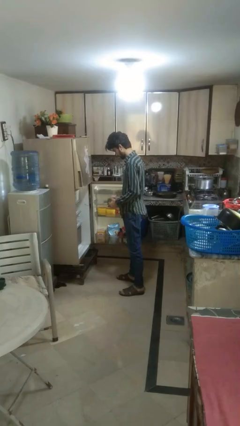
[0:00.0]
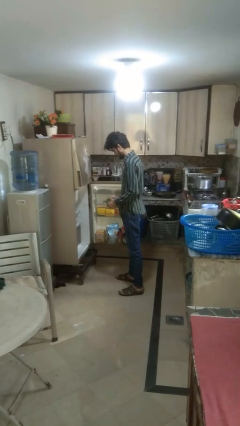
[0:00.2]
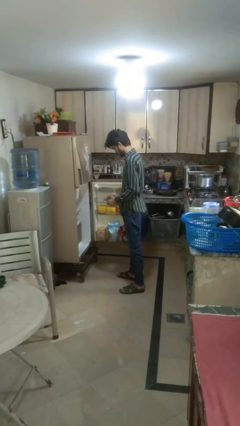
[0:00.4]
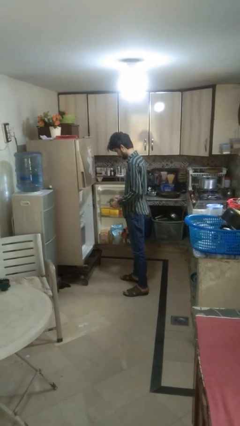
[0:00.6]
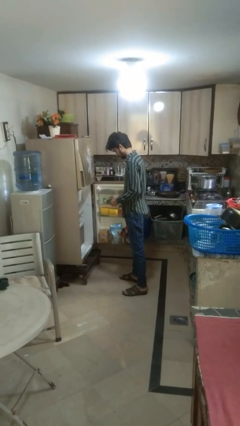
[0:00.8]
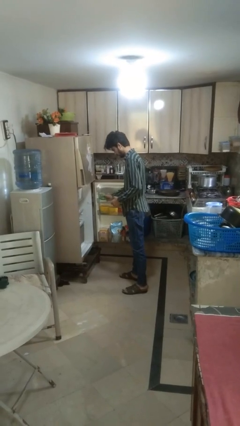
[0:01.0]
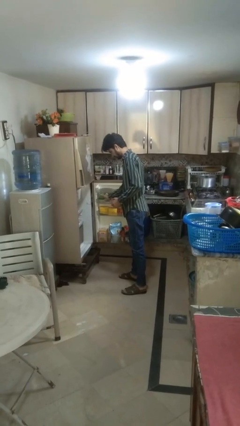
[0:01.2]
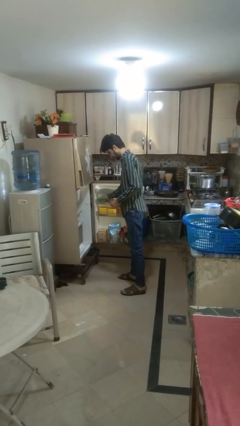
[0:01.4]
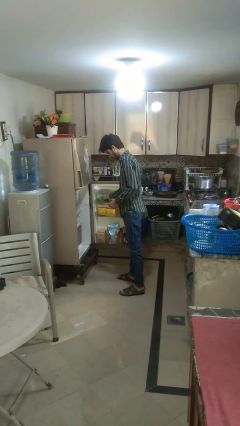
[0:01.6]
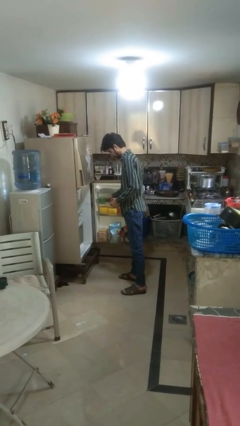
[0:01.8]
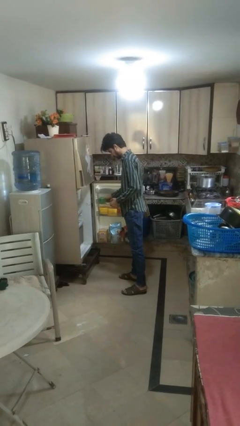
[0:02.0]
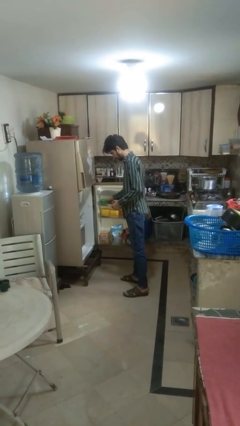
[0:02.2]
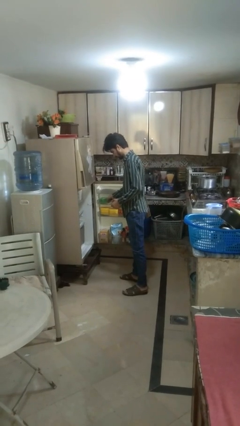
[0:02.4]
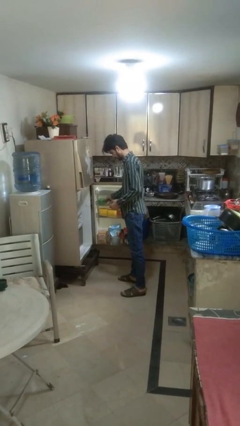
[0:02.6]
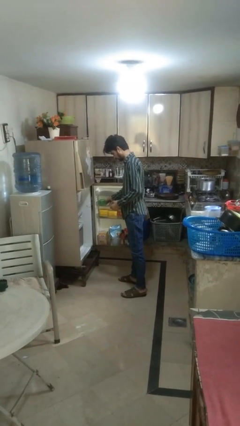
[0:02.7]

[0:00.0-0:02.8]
person puts object into refrigerator

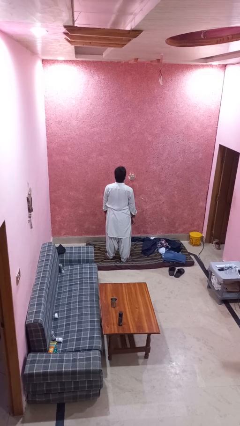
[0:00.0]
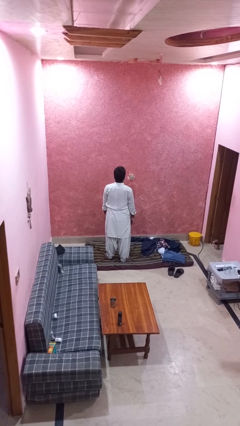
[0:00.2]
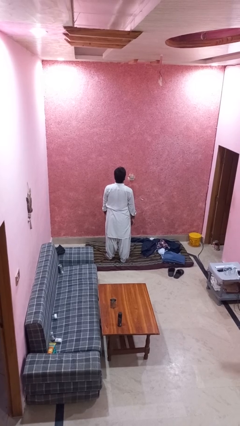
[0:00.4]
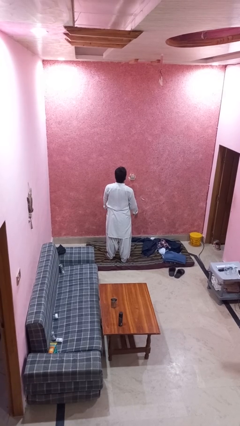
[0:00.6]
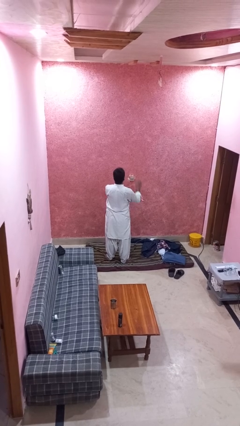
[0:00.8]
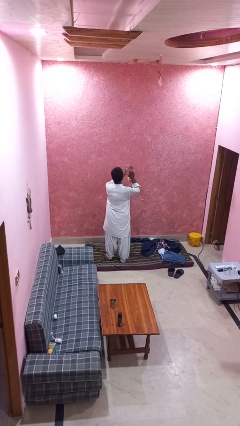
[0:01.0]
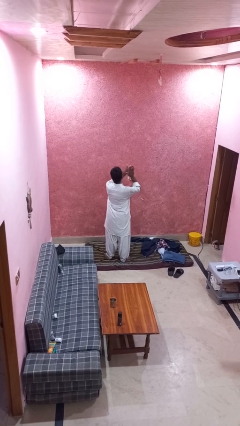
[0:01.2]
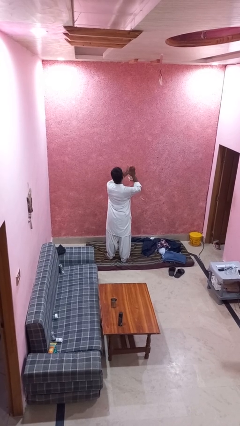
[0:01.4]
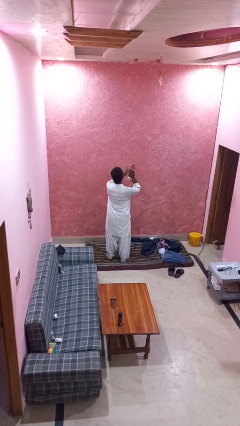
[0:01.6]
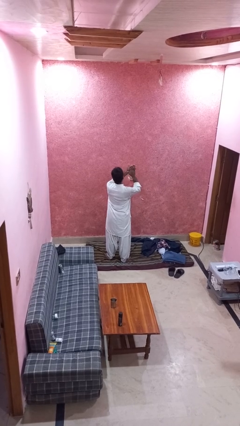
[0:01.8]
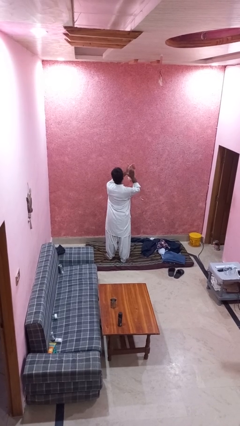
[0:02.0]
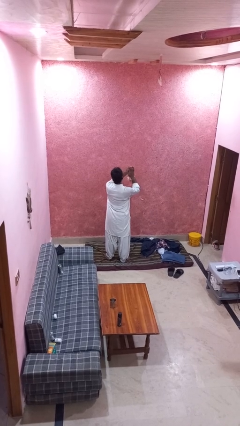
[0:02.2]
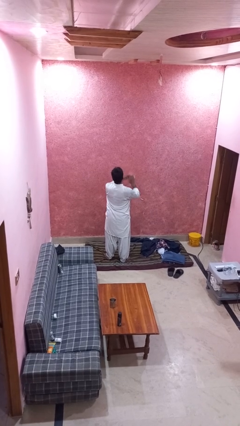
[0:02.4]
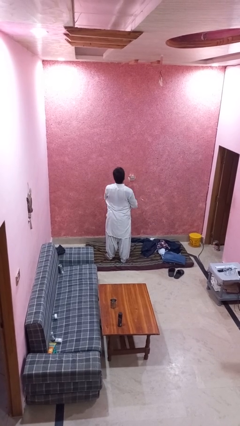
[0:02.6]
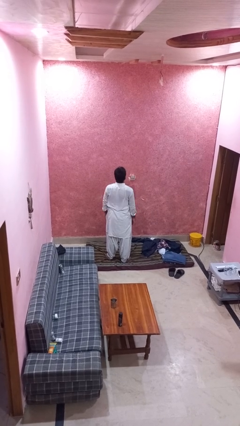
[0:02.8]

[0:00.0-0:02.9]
person claps hands

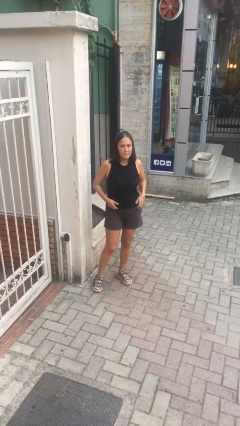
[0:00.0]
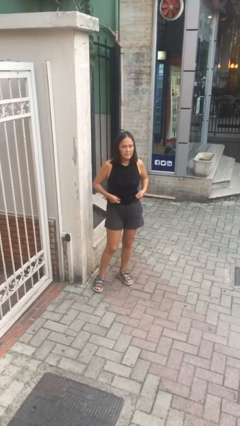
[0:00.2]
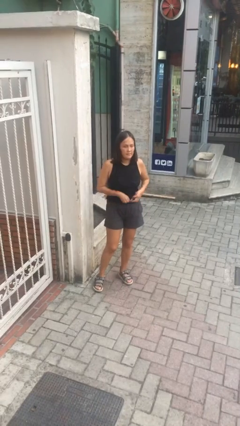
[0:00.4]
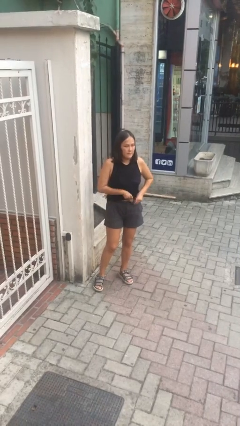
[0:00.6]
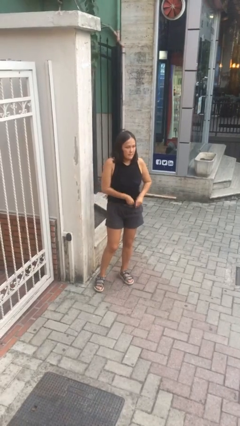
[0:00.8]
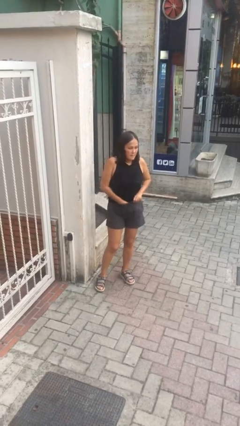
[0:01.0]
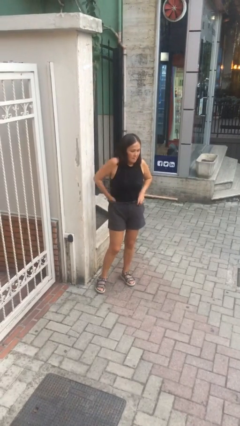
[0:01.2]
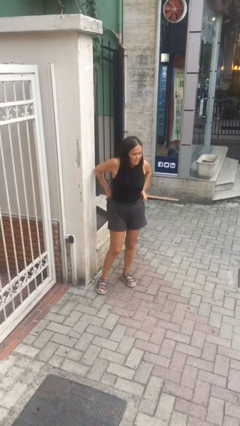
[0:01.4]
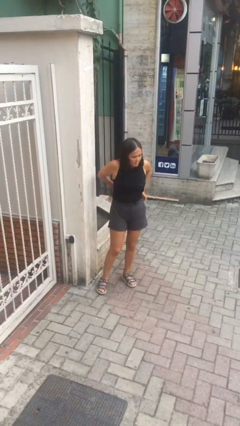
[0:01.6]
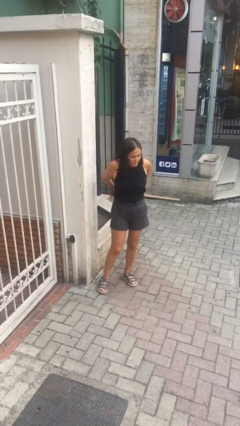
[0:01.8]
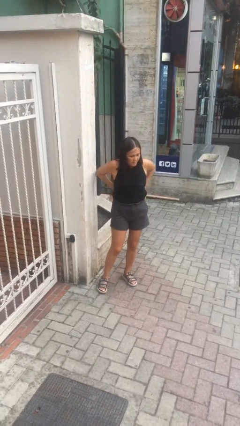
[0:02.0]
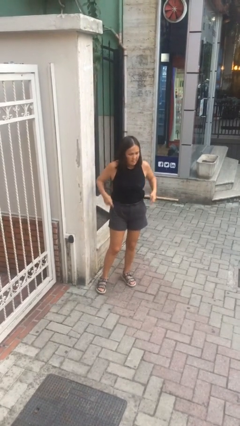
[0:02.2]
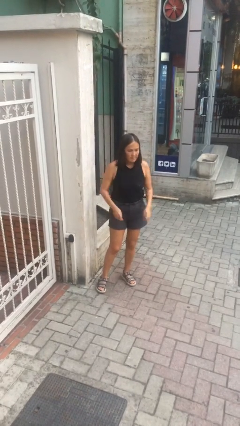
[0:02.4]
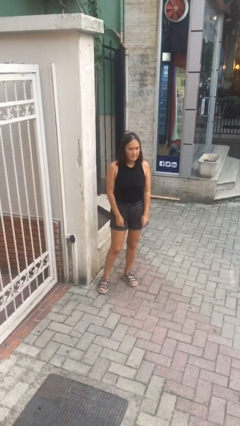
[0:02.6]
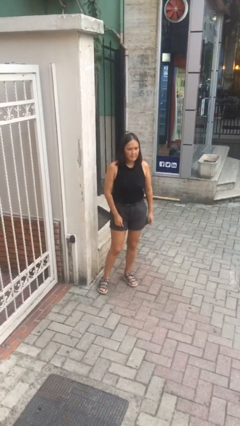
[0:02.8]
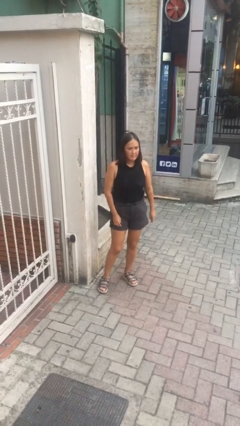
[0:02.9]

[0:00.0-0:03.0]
person tucks in shirt

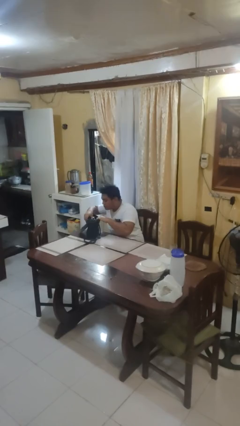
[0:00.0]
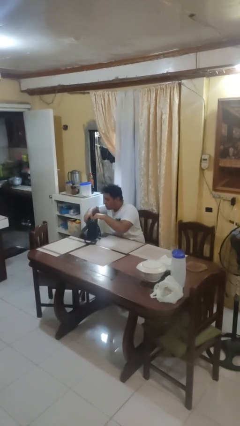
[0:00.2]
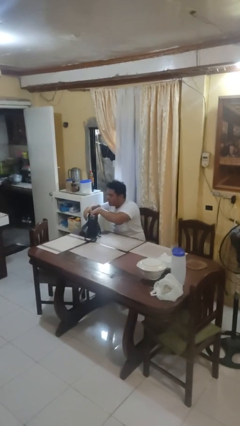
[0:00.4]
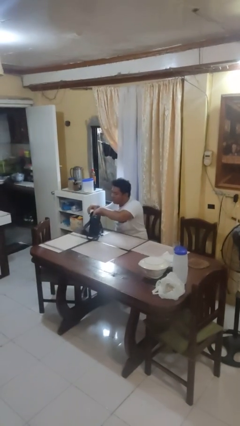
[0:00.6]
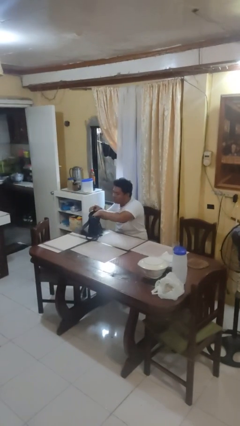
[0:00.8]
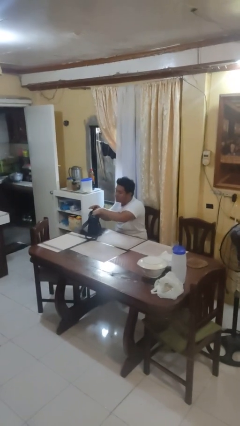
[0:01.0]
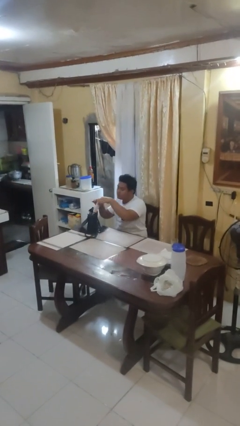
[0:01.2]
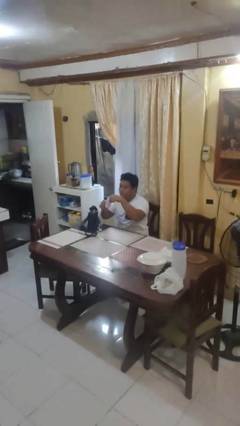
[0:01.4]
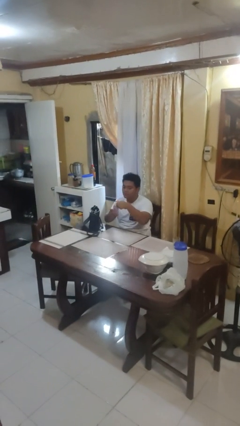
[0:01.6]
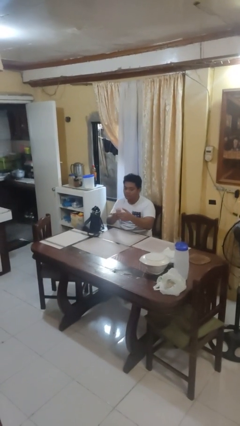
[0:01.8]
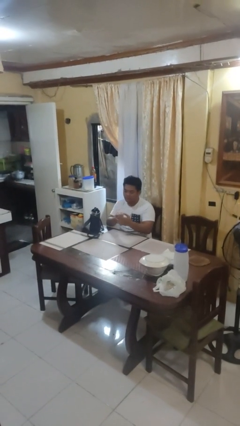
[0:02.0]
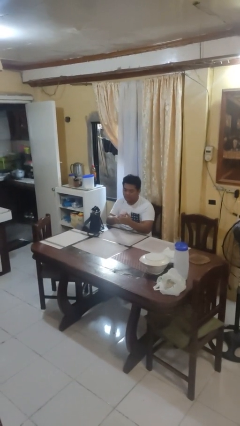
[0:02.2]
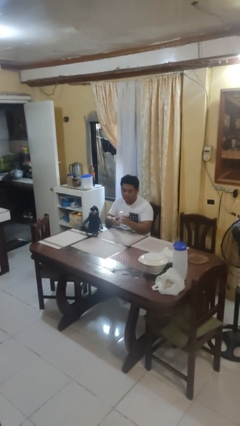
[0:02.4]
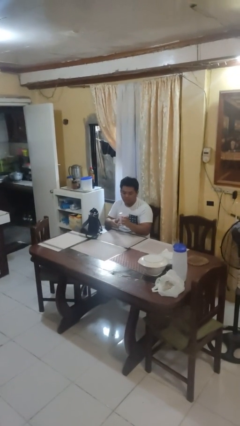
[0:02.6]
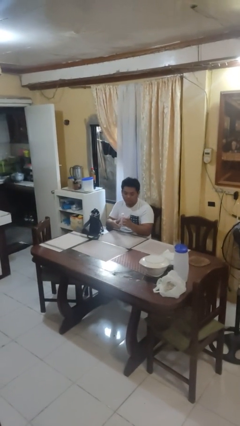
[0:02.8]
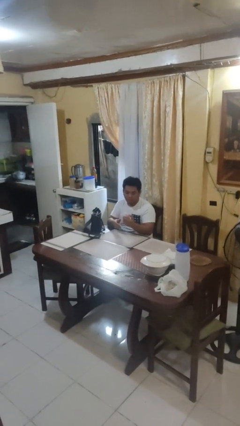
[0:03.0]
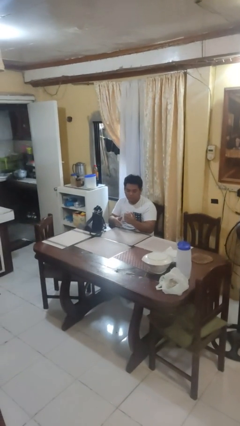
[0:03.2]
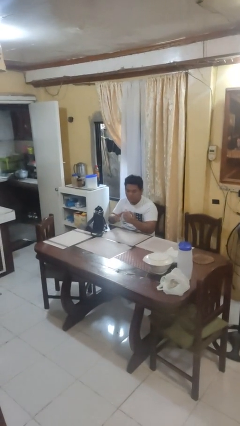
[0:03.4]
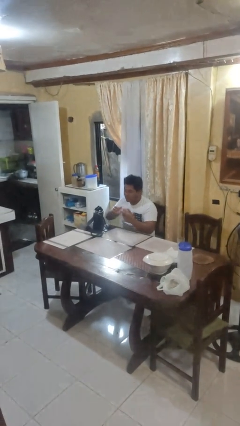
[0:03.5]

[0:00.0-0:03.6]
person takes object from purse

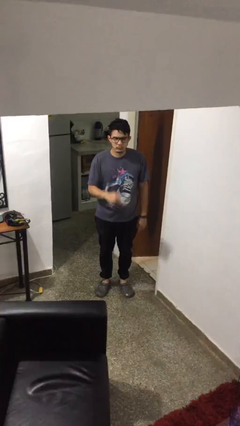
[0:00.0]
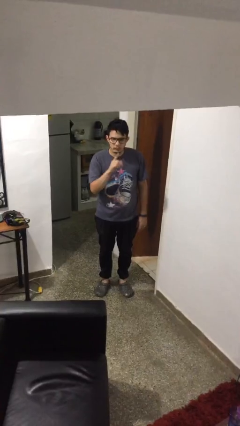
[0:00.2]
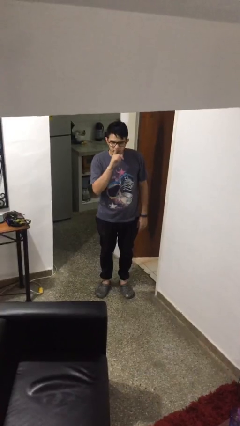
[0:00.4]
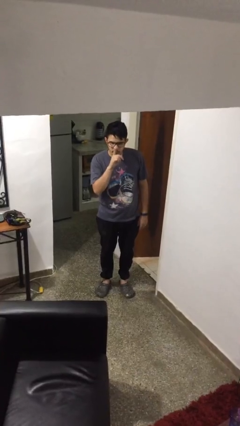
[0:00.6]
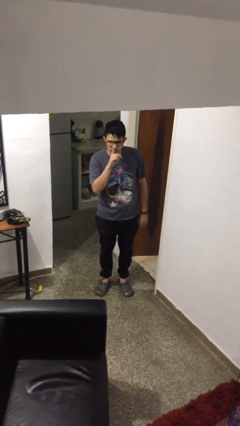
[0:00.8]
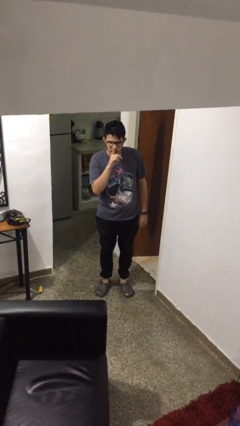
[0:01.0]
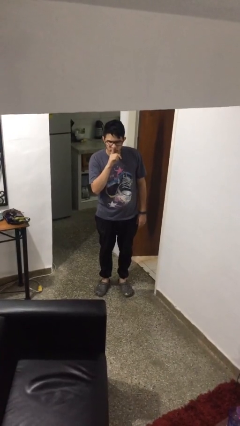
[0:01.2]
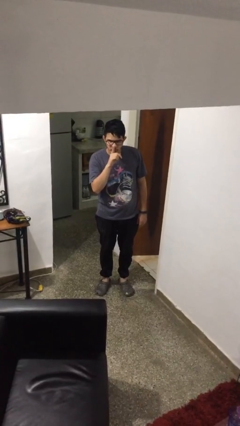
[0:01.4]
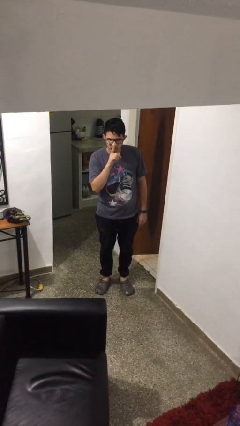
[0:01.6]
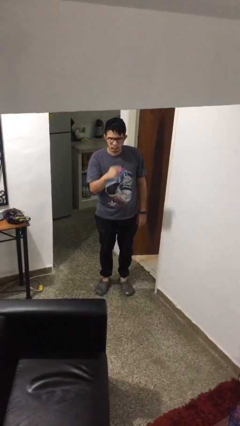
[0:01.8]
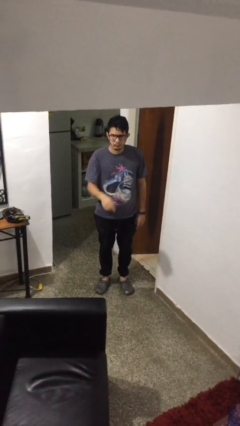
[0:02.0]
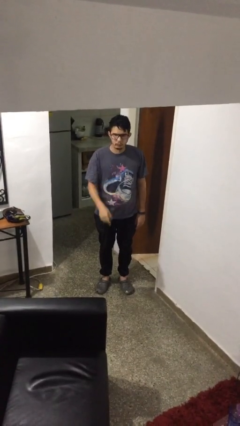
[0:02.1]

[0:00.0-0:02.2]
person gestures be quiet

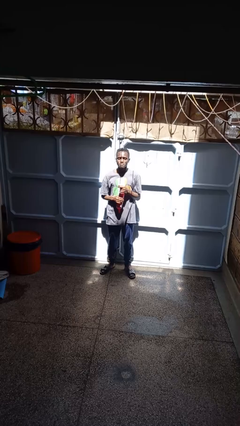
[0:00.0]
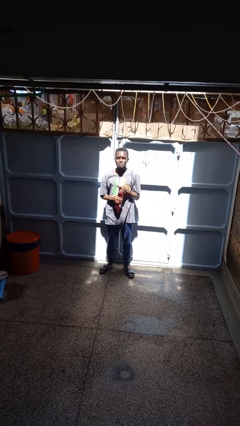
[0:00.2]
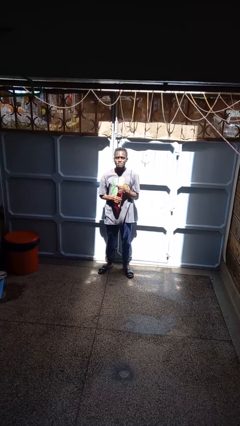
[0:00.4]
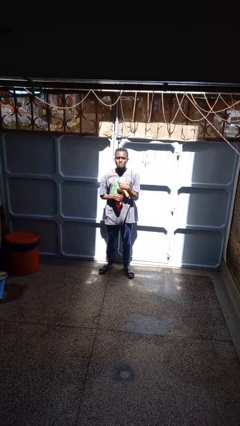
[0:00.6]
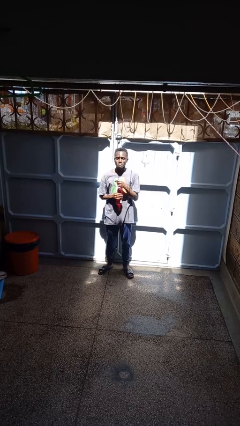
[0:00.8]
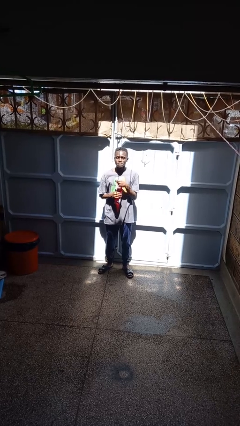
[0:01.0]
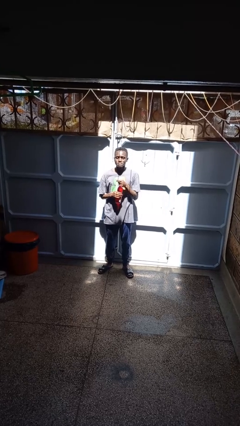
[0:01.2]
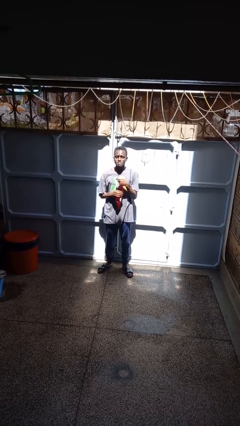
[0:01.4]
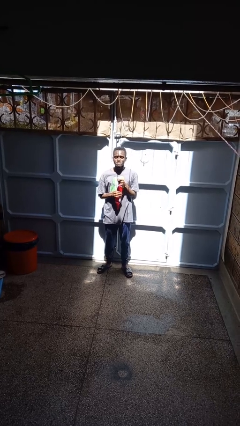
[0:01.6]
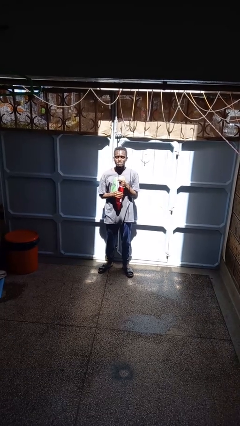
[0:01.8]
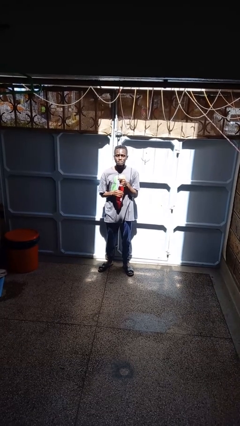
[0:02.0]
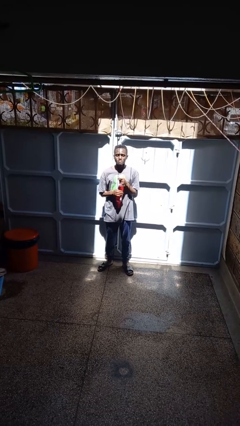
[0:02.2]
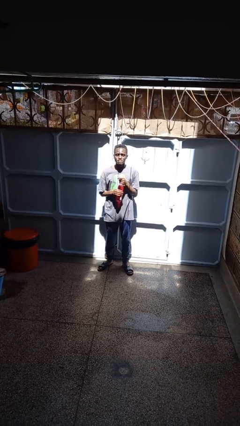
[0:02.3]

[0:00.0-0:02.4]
person opens beverage can

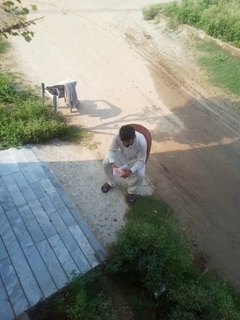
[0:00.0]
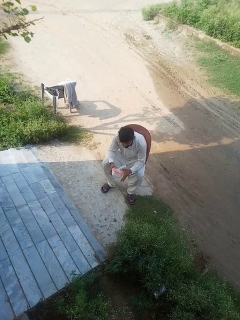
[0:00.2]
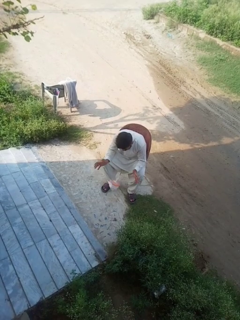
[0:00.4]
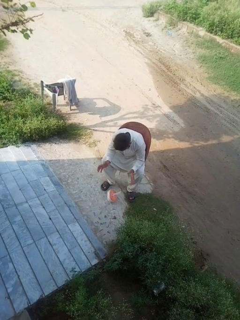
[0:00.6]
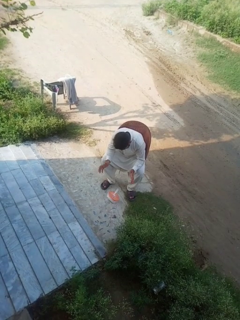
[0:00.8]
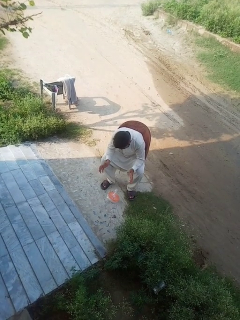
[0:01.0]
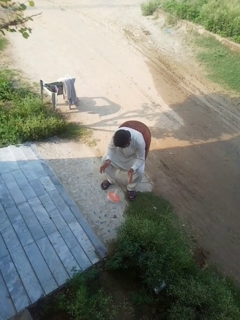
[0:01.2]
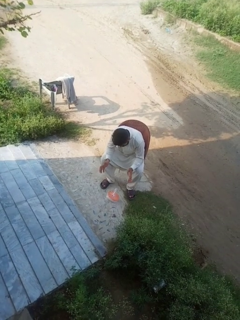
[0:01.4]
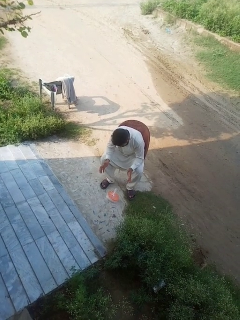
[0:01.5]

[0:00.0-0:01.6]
person drops object
